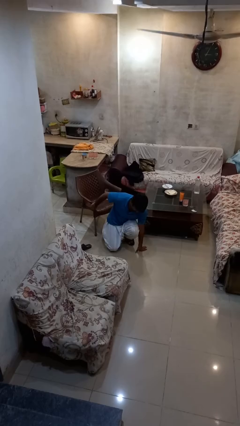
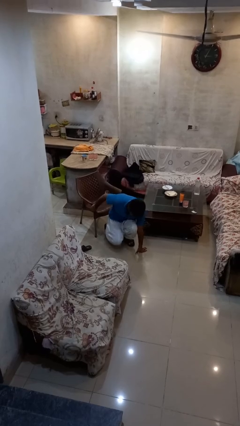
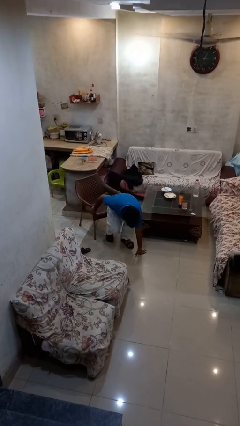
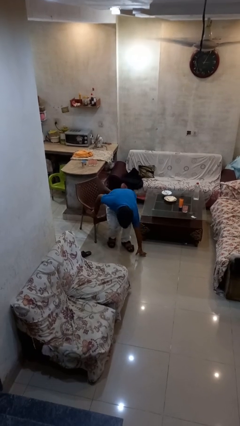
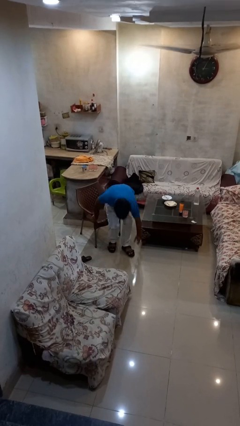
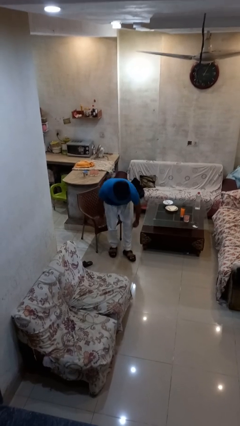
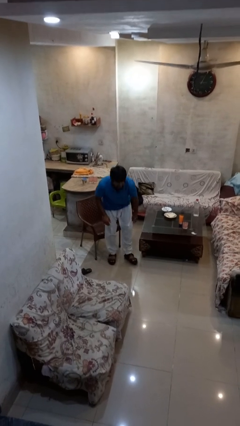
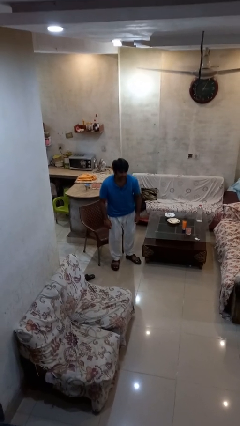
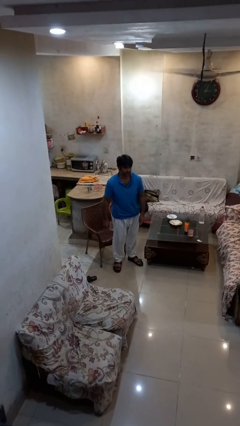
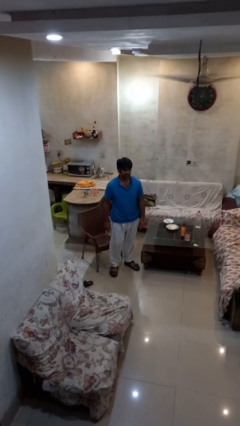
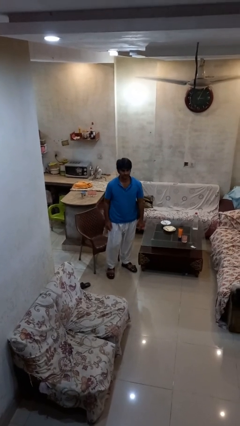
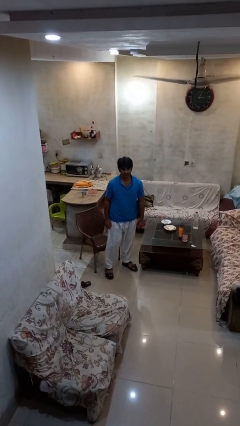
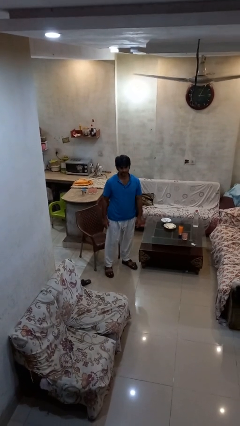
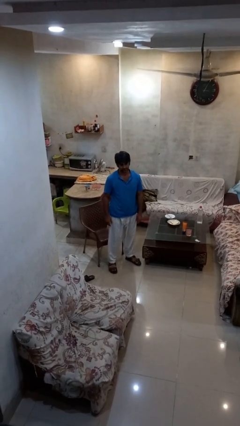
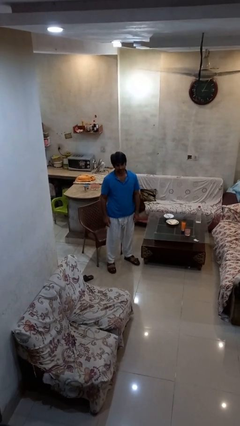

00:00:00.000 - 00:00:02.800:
person stands up from floor

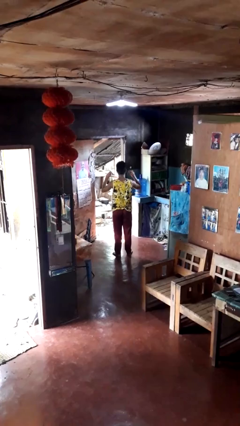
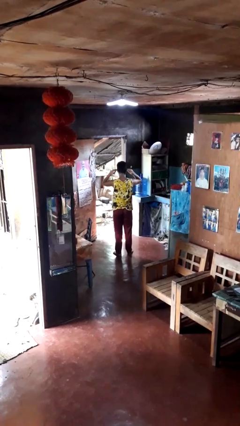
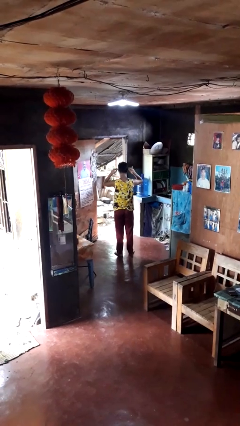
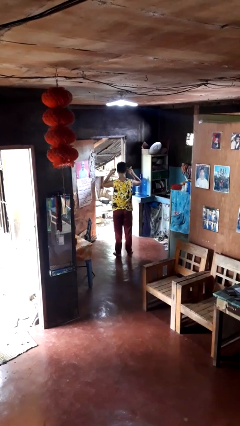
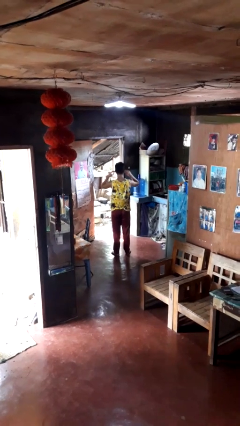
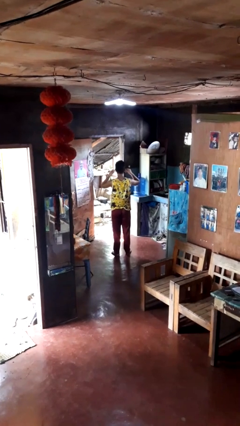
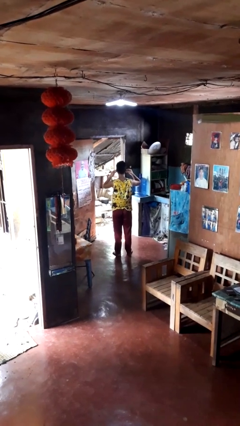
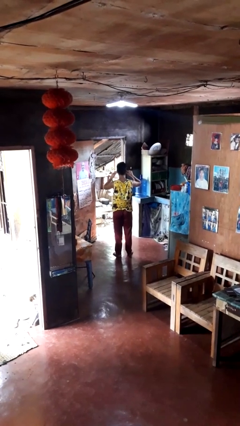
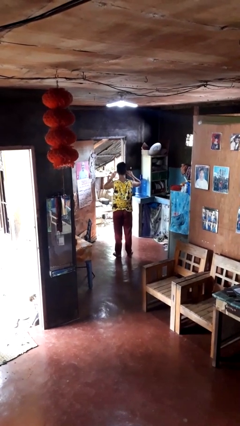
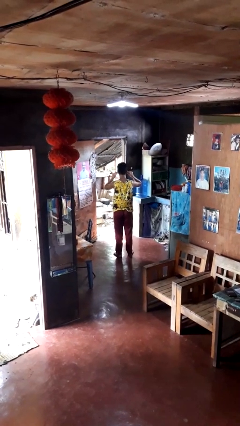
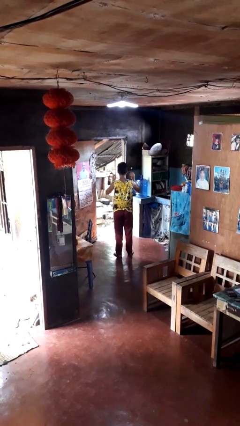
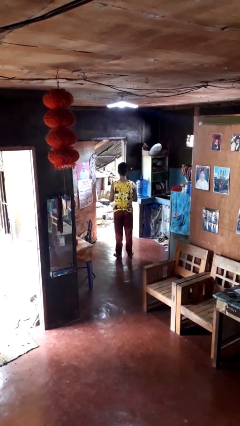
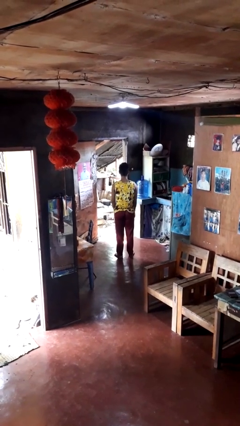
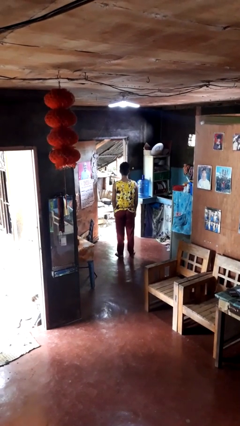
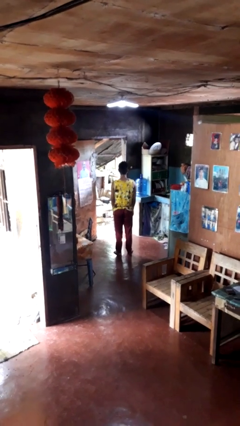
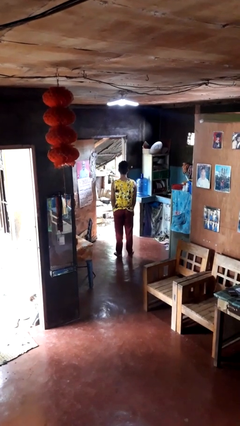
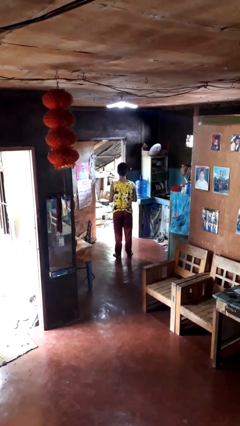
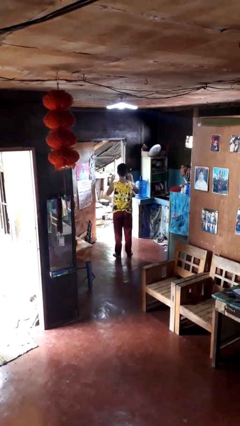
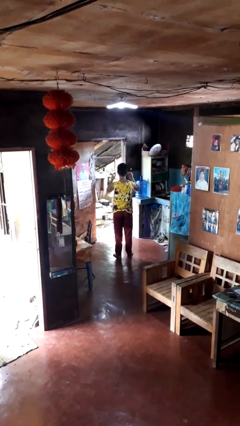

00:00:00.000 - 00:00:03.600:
person puts on headphones

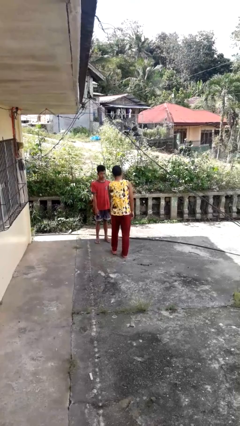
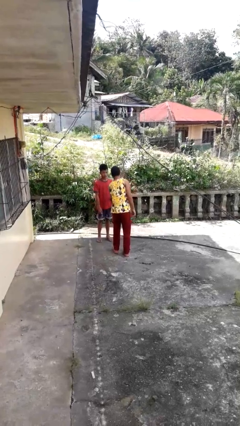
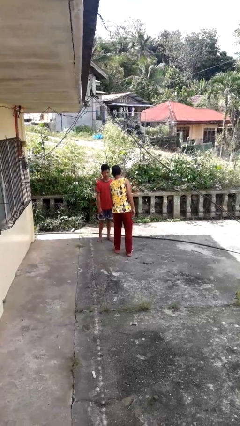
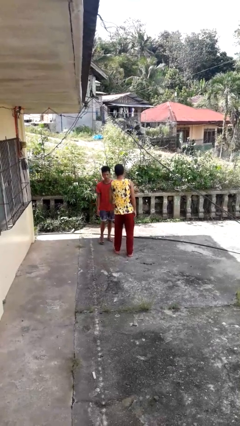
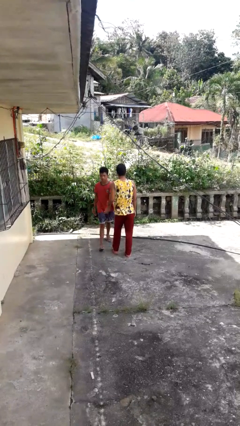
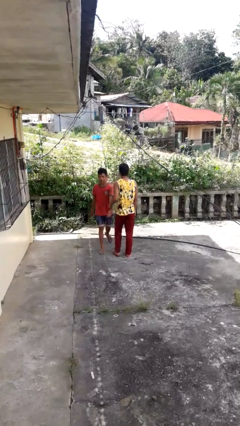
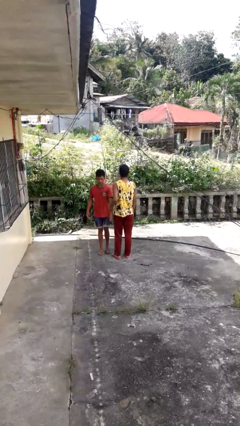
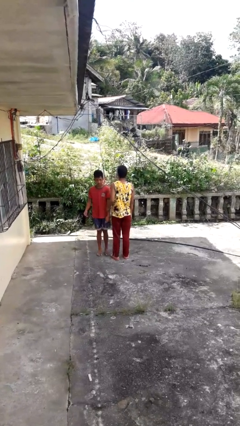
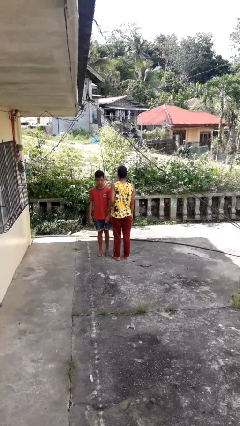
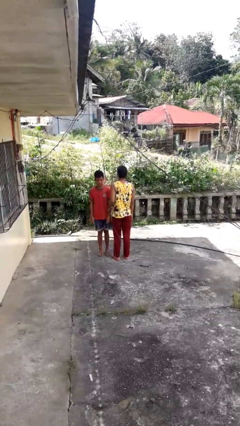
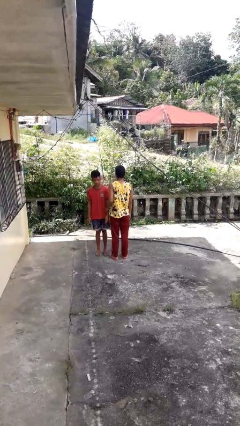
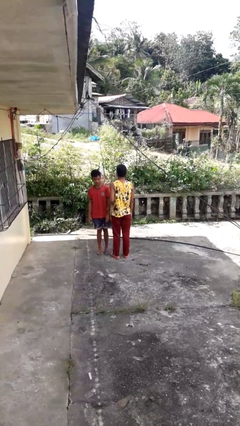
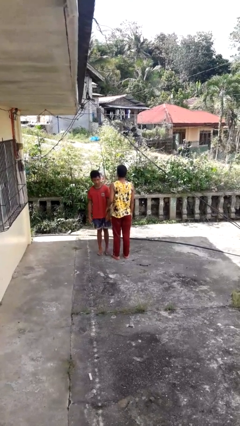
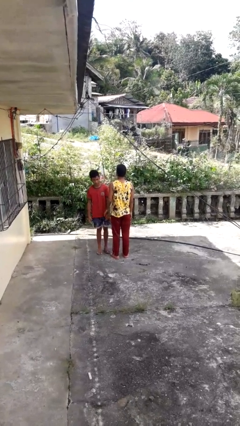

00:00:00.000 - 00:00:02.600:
person grabs person by forearm

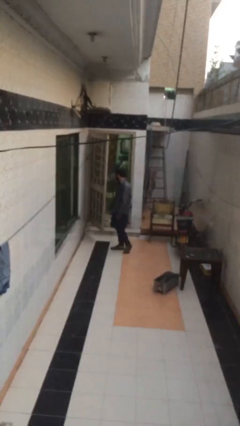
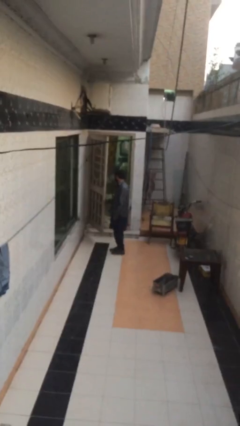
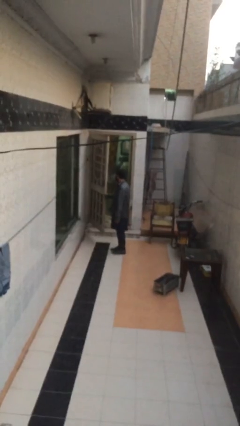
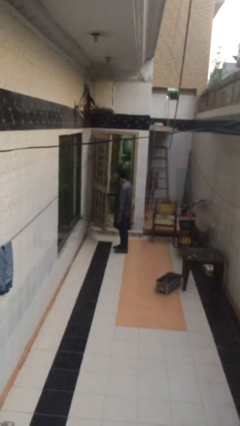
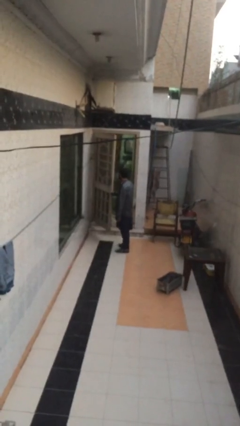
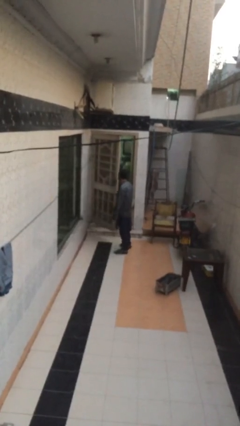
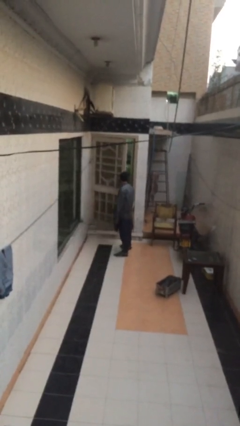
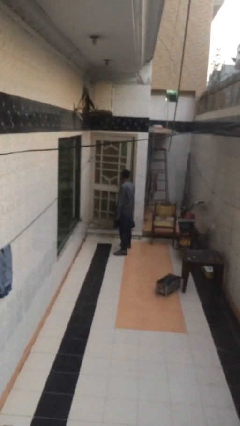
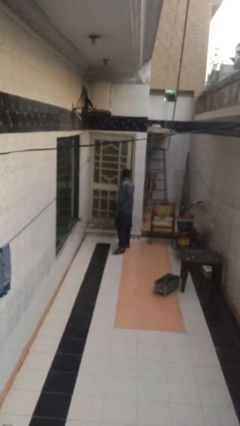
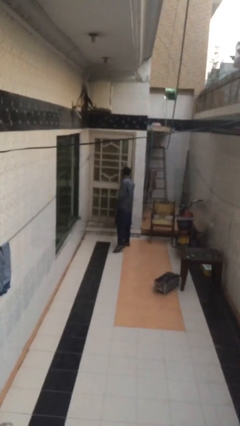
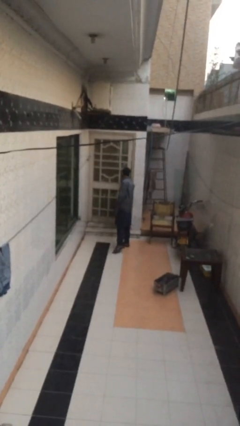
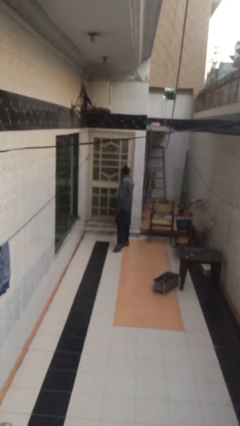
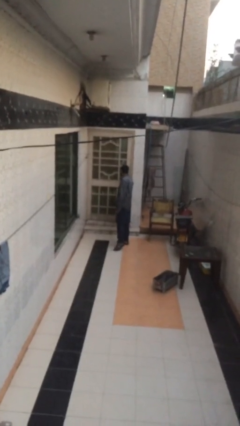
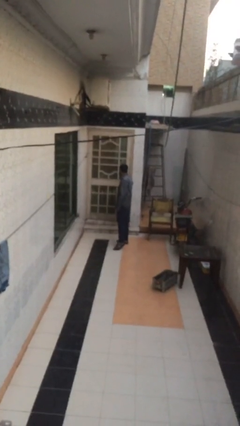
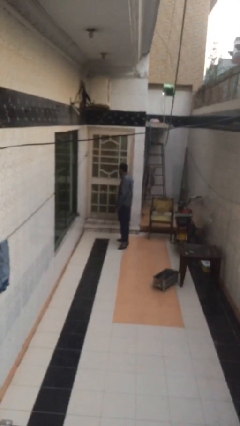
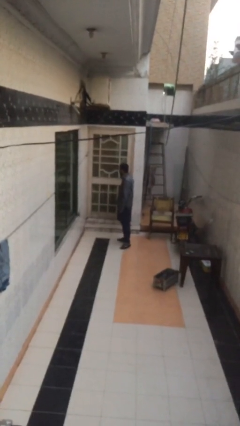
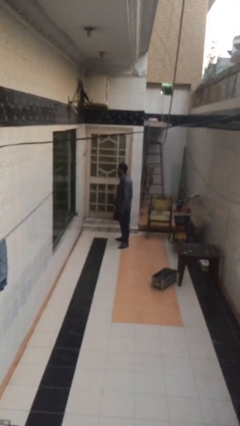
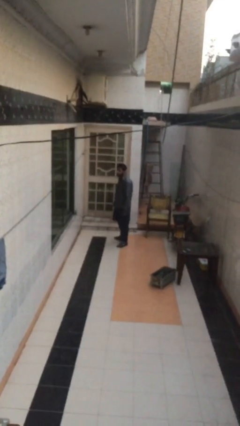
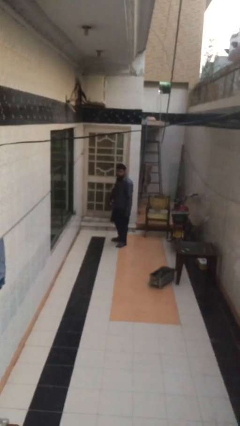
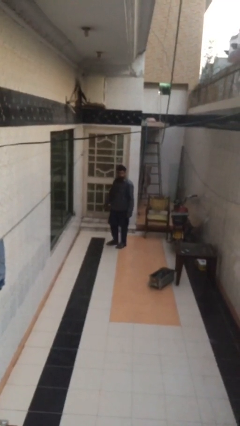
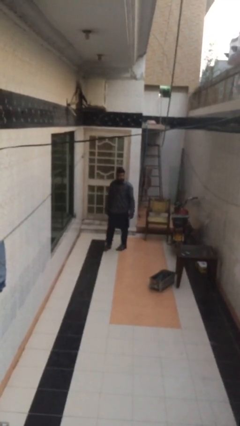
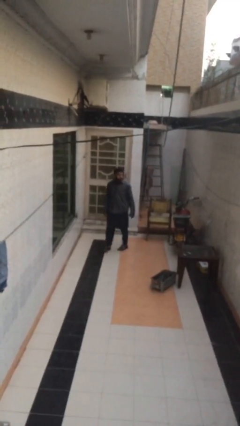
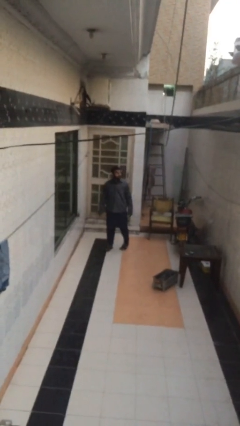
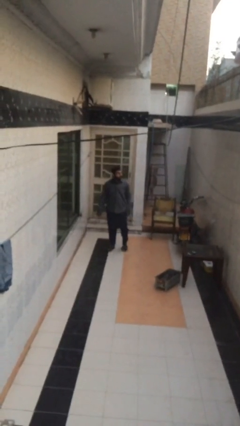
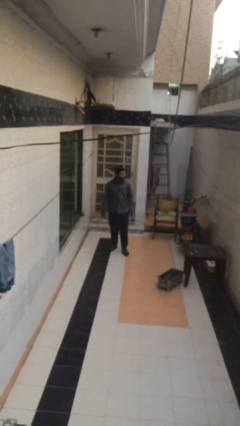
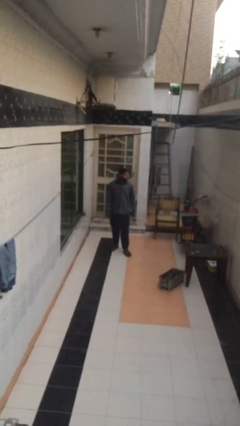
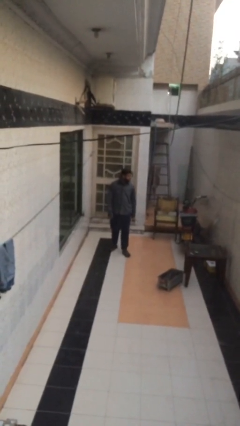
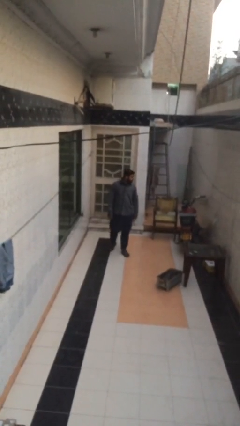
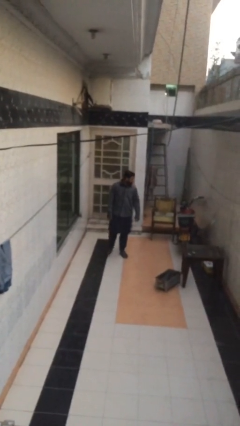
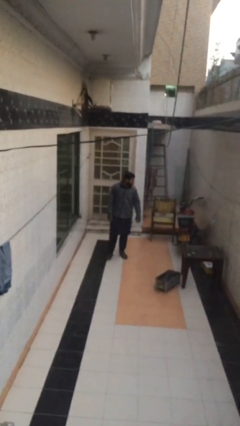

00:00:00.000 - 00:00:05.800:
person closes facility door

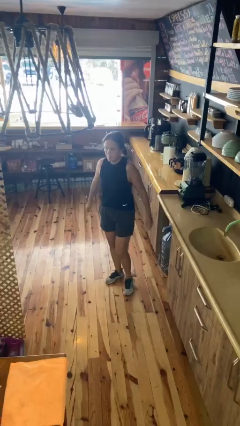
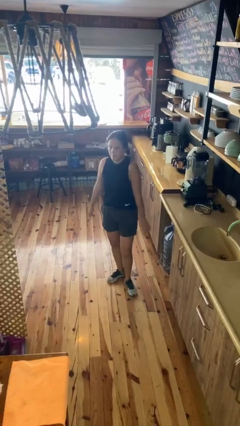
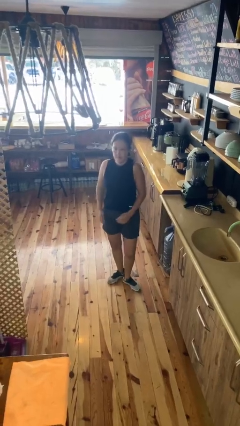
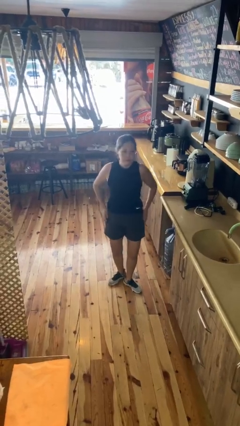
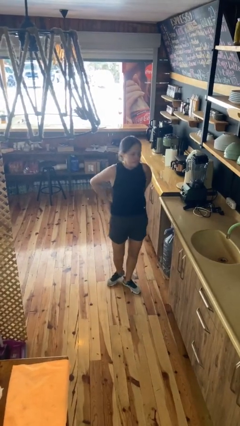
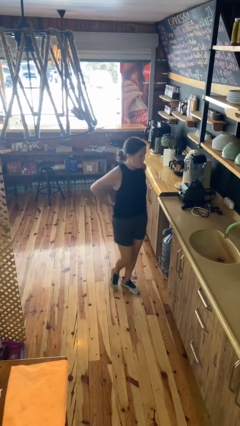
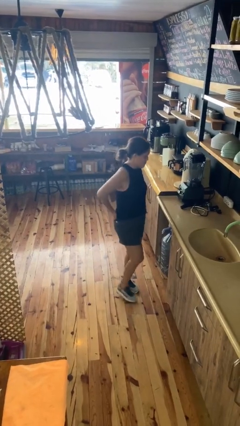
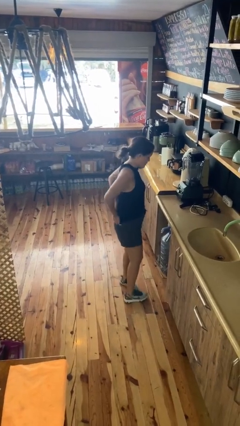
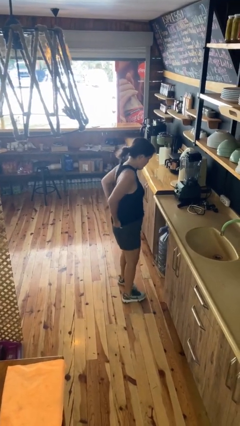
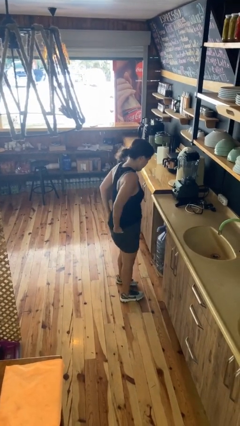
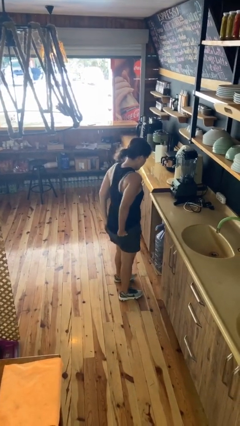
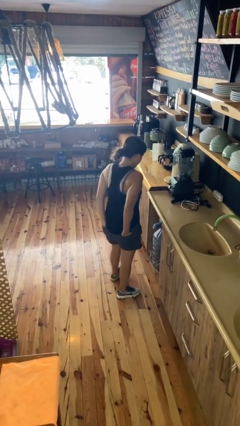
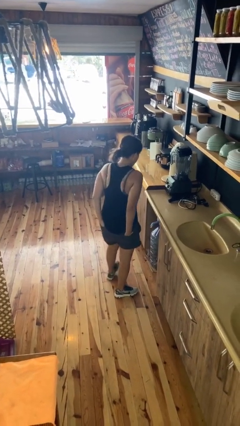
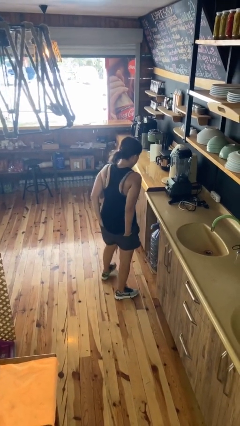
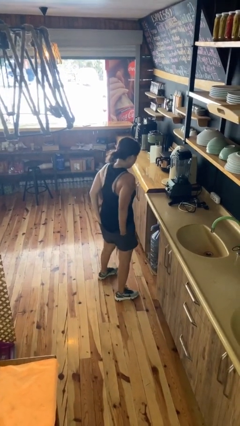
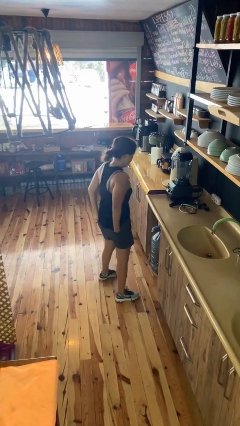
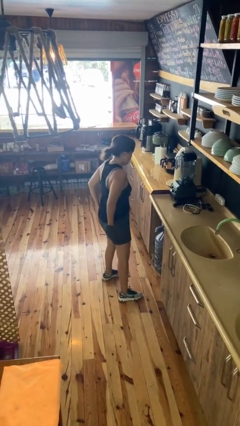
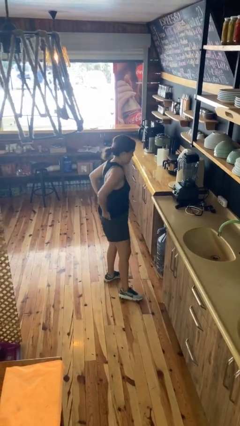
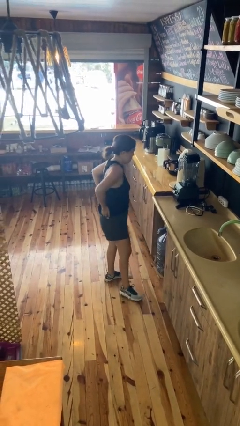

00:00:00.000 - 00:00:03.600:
person puts hands in back pockets
